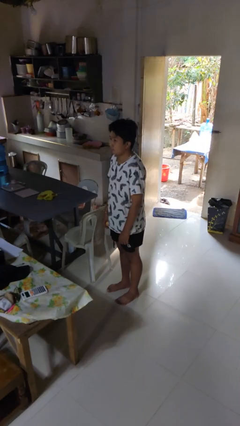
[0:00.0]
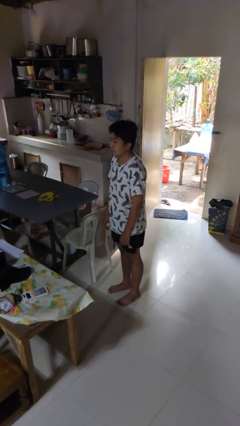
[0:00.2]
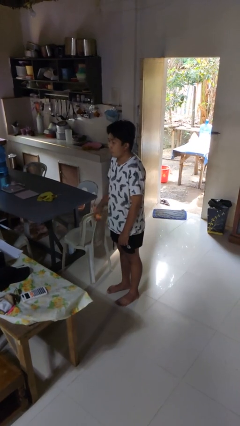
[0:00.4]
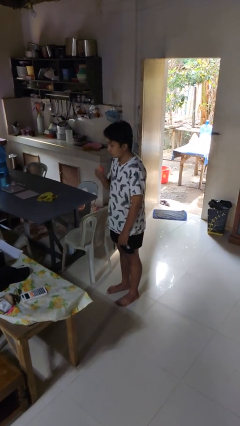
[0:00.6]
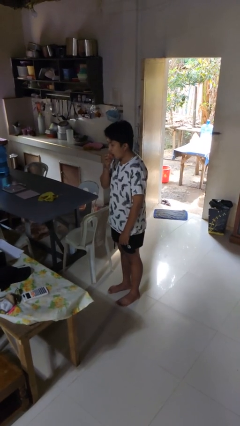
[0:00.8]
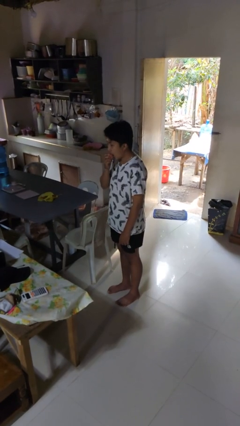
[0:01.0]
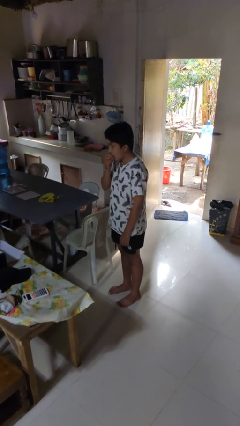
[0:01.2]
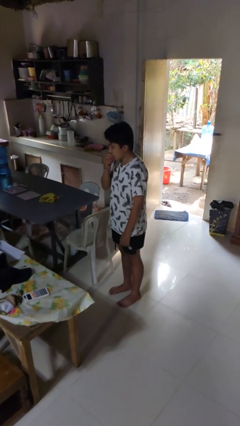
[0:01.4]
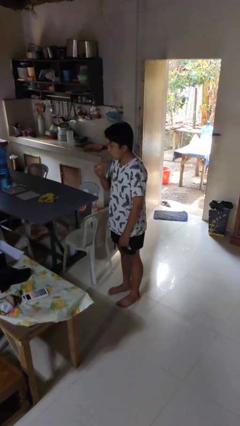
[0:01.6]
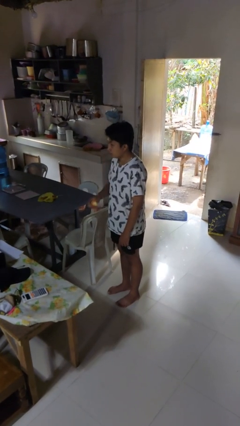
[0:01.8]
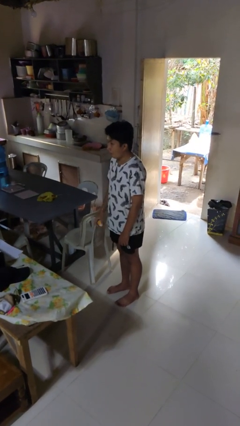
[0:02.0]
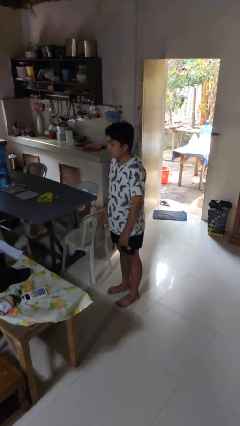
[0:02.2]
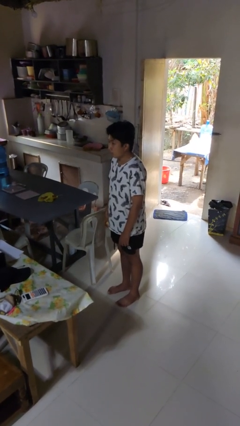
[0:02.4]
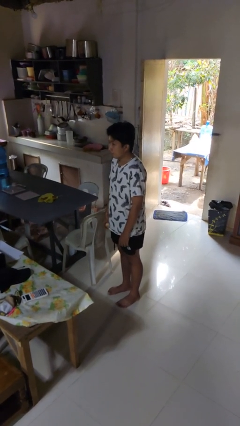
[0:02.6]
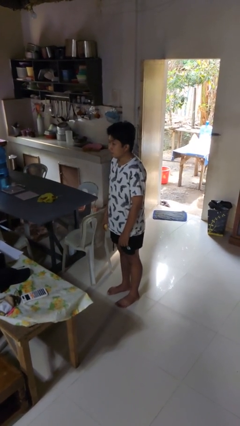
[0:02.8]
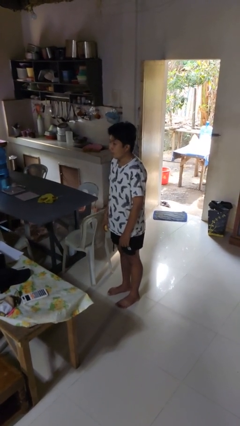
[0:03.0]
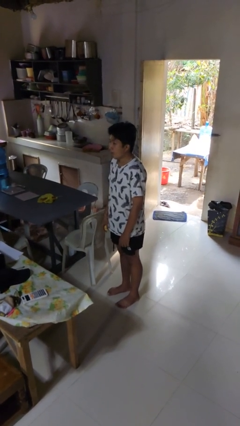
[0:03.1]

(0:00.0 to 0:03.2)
person eats apple

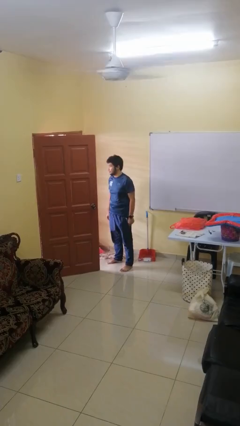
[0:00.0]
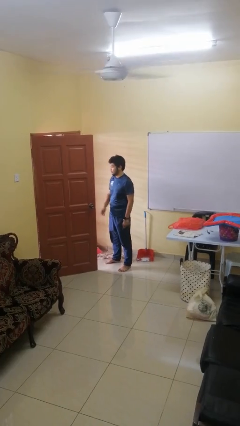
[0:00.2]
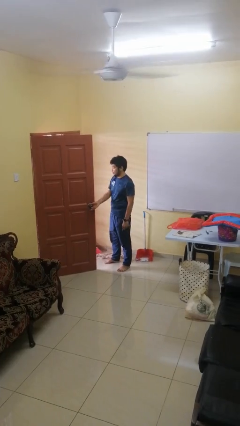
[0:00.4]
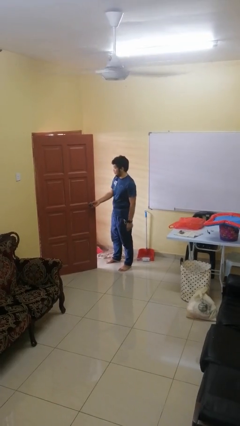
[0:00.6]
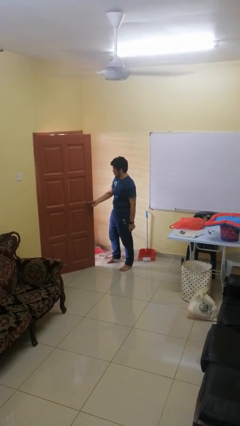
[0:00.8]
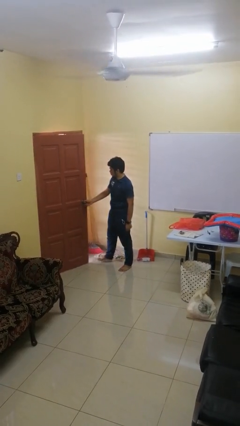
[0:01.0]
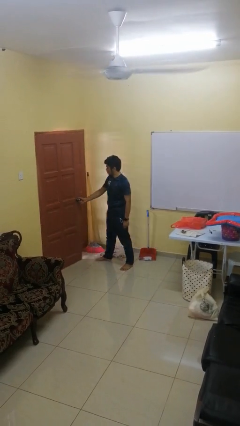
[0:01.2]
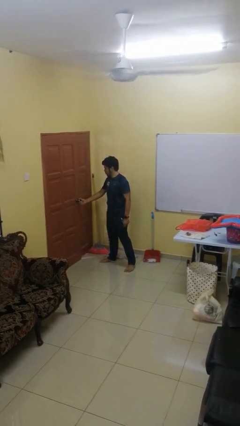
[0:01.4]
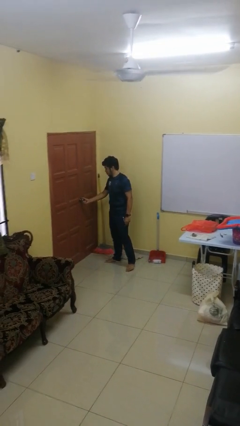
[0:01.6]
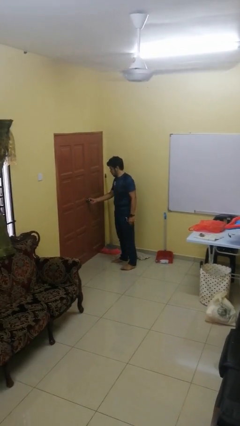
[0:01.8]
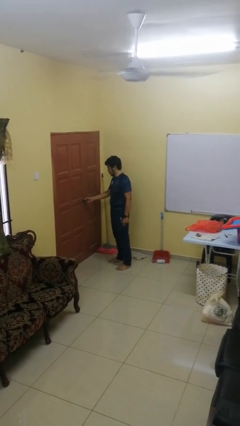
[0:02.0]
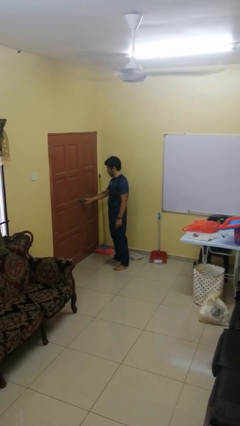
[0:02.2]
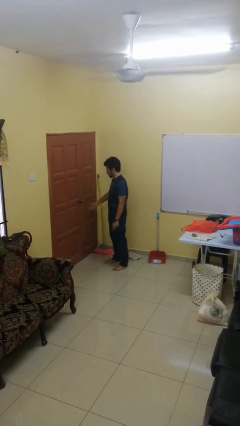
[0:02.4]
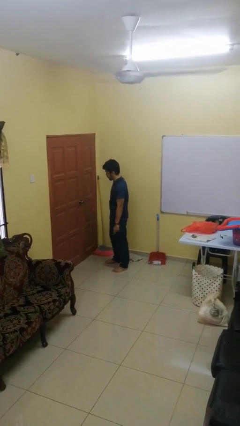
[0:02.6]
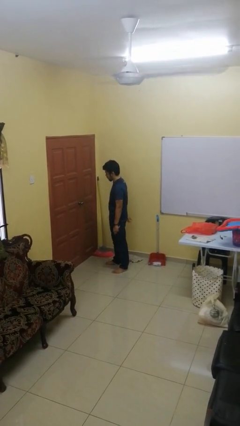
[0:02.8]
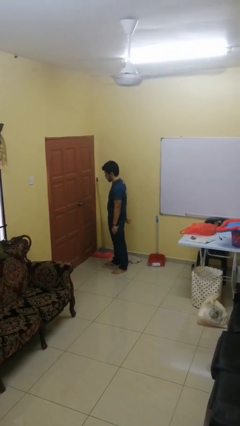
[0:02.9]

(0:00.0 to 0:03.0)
person closes facility door

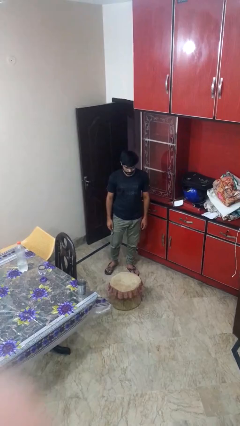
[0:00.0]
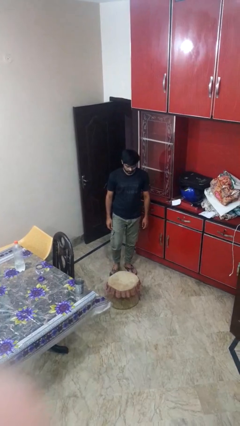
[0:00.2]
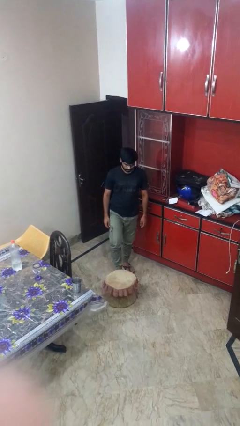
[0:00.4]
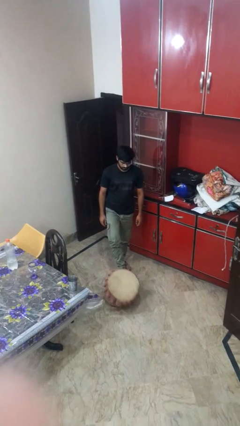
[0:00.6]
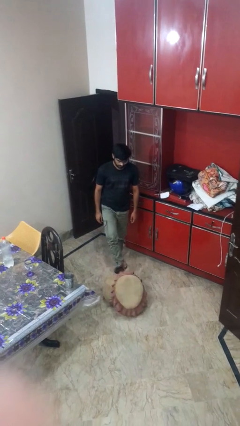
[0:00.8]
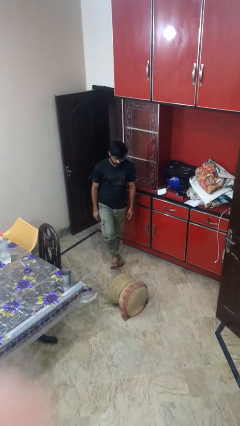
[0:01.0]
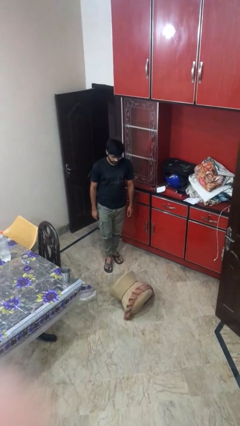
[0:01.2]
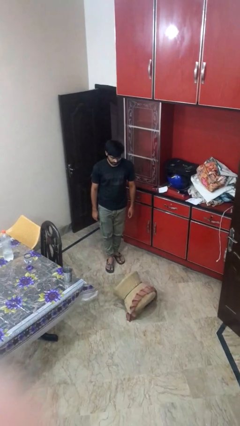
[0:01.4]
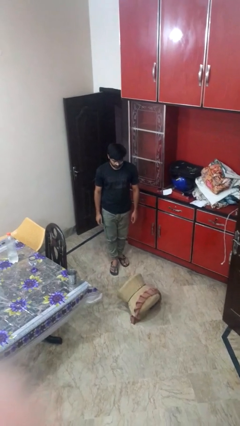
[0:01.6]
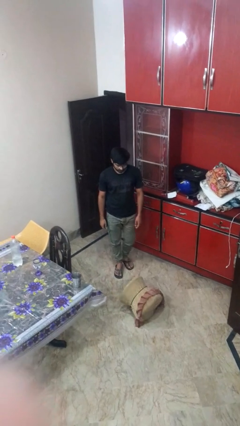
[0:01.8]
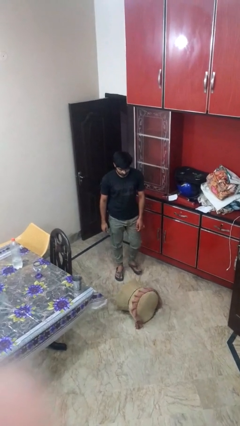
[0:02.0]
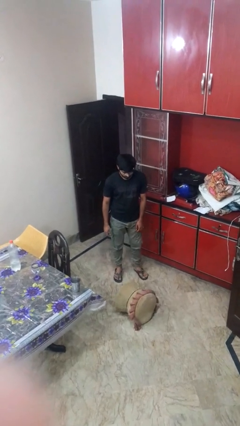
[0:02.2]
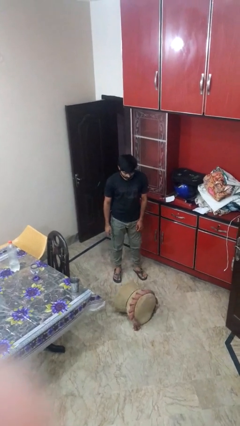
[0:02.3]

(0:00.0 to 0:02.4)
person knocks over furniture

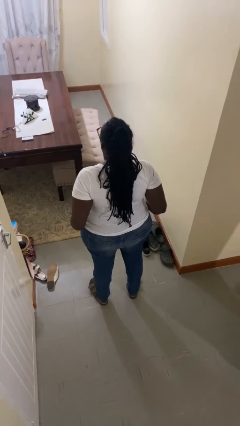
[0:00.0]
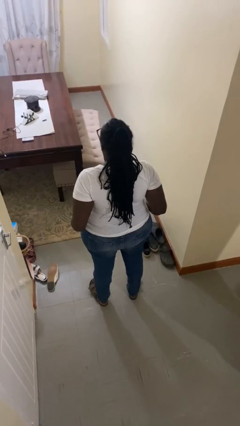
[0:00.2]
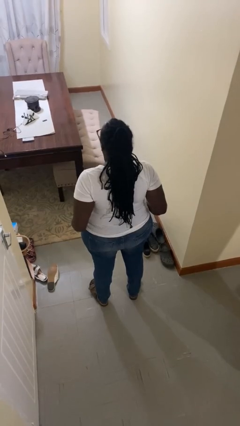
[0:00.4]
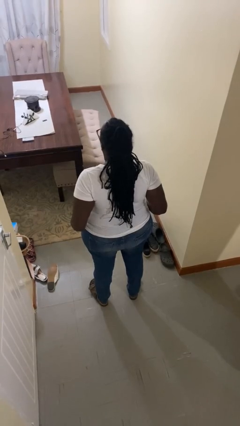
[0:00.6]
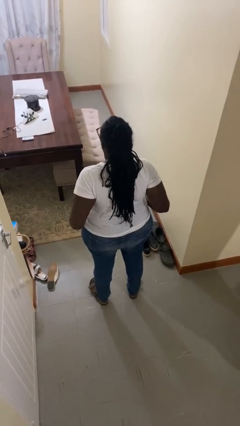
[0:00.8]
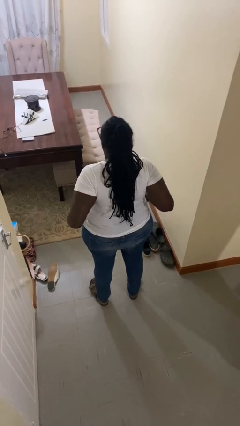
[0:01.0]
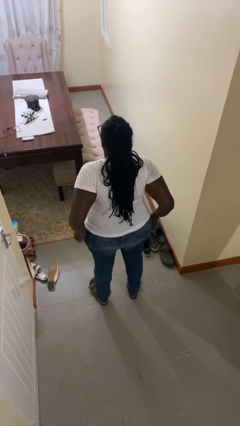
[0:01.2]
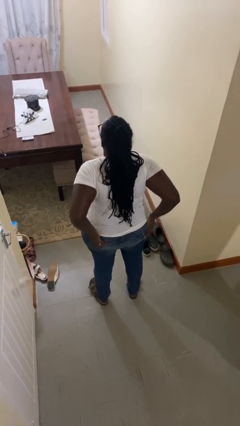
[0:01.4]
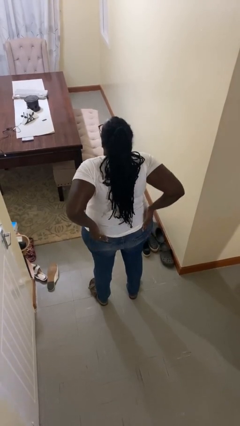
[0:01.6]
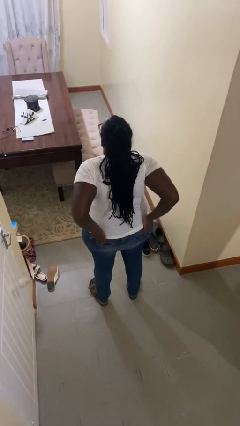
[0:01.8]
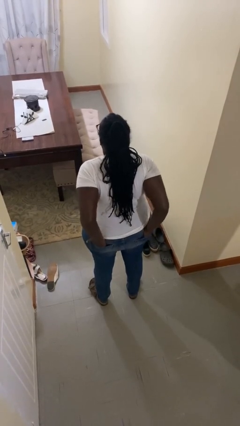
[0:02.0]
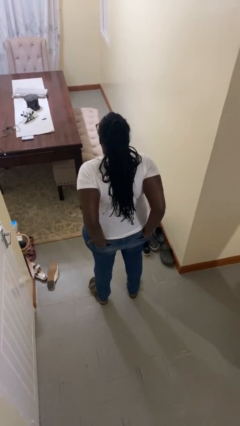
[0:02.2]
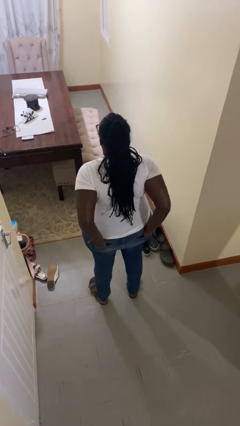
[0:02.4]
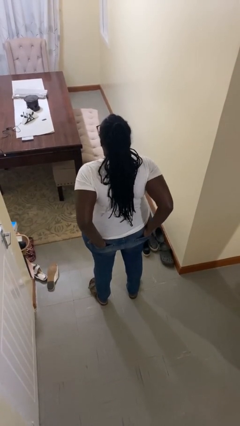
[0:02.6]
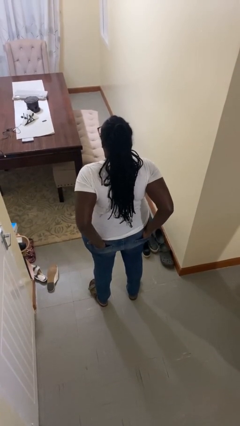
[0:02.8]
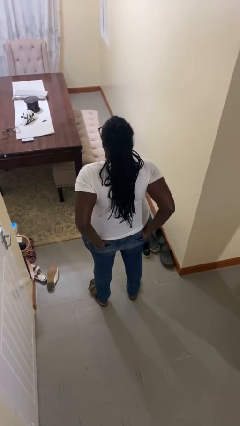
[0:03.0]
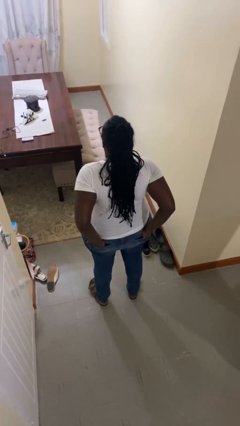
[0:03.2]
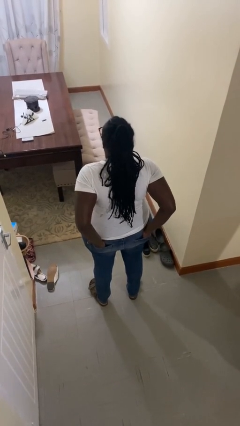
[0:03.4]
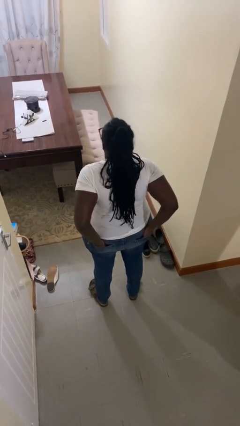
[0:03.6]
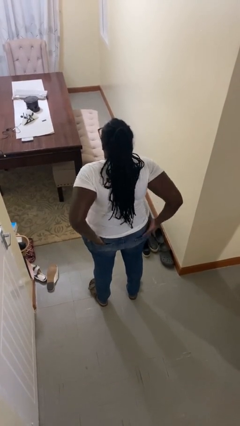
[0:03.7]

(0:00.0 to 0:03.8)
person puts hands in back pockets

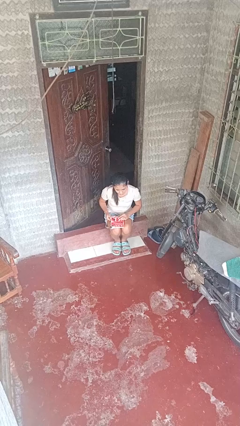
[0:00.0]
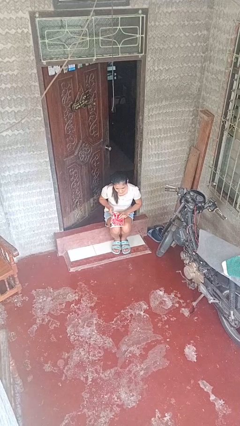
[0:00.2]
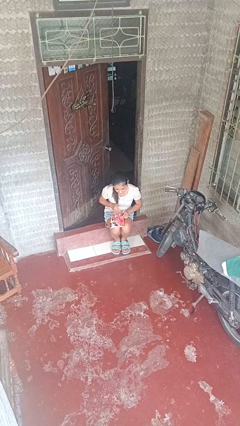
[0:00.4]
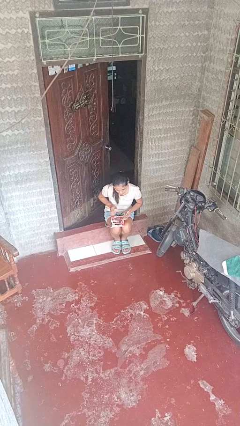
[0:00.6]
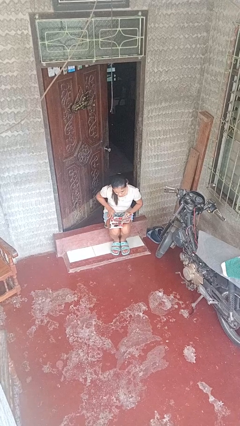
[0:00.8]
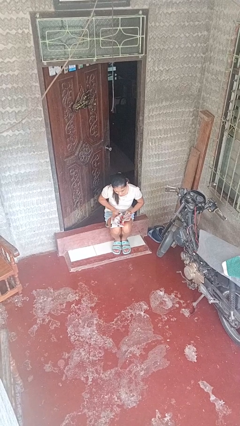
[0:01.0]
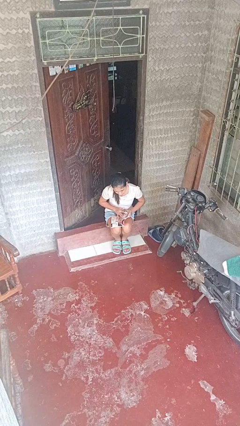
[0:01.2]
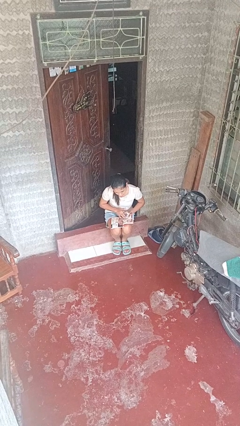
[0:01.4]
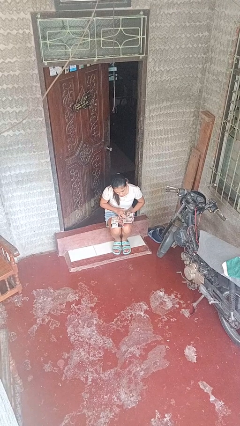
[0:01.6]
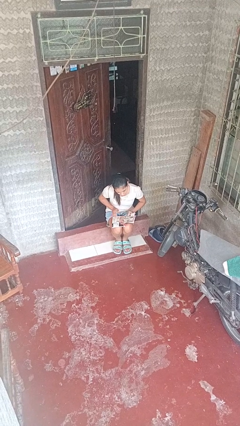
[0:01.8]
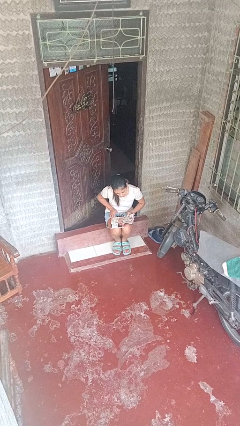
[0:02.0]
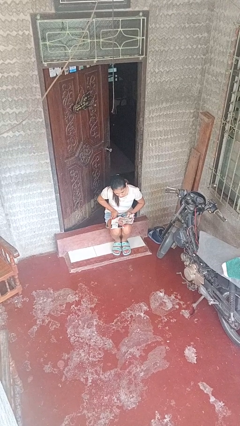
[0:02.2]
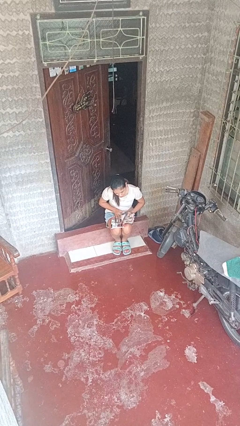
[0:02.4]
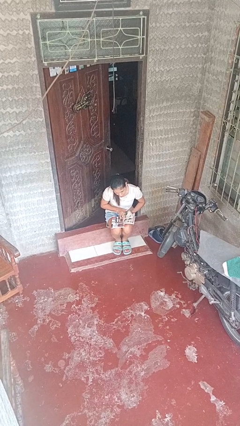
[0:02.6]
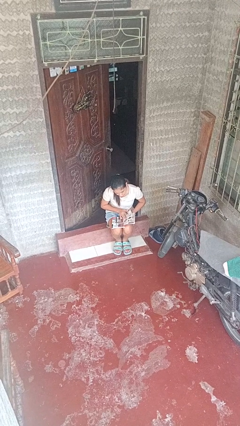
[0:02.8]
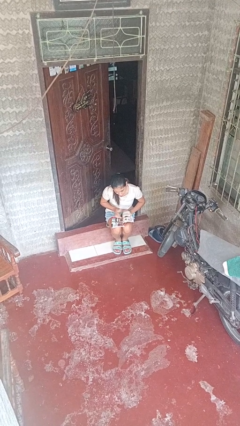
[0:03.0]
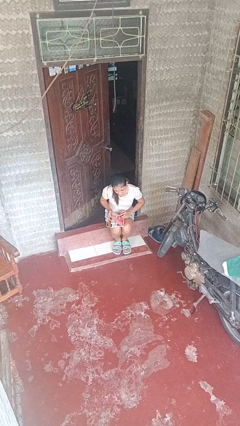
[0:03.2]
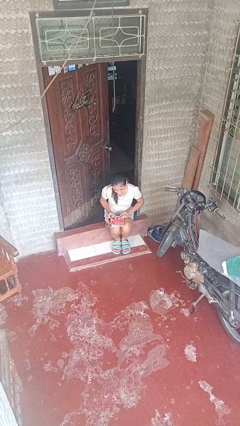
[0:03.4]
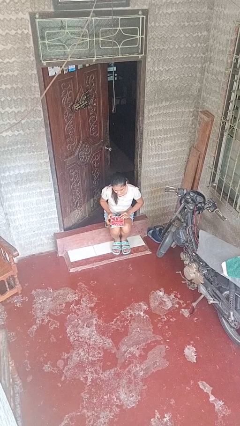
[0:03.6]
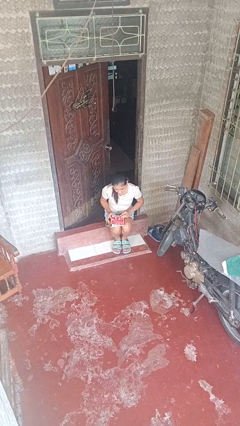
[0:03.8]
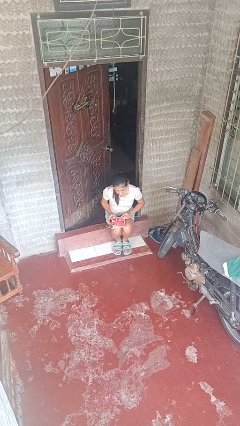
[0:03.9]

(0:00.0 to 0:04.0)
person reads magazine

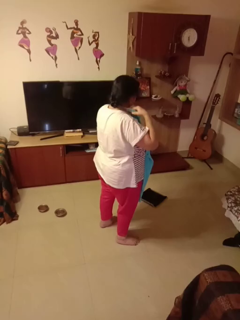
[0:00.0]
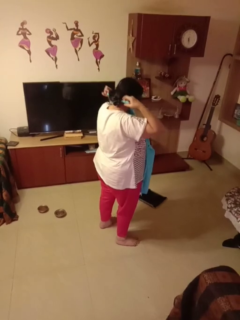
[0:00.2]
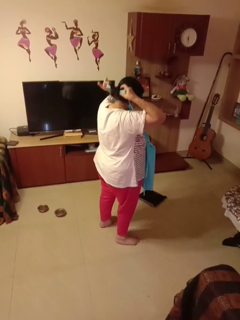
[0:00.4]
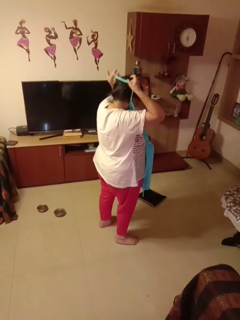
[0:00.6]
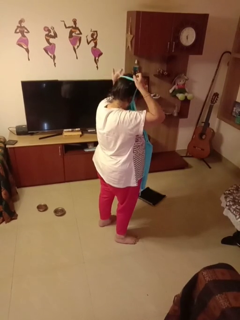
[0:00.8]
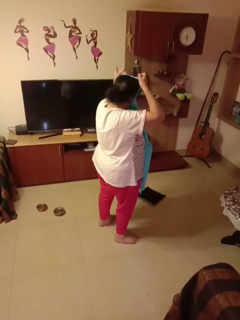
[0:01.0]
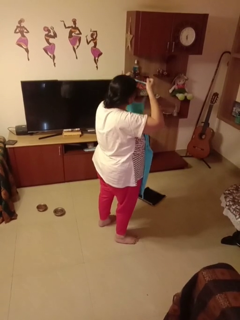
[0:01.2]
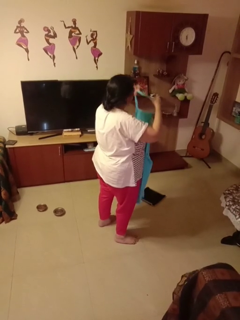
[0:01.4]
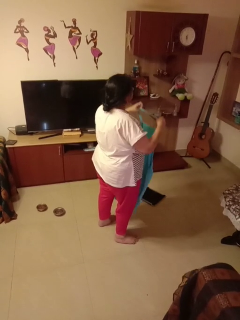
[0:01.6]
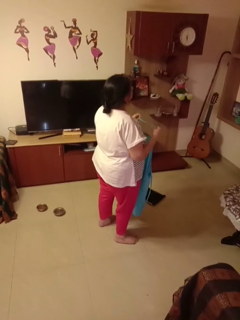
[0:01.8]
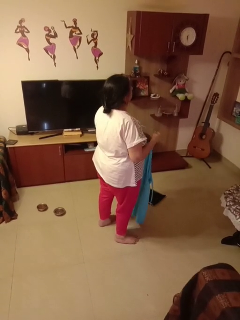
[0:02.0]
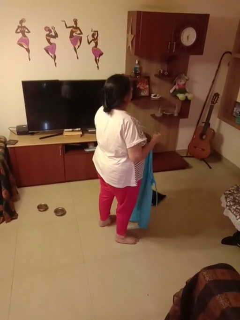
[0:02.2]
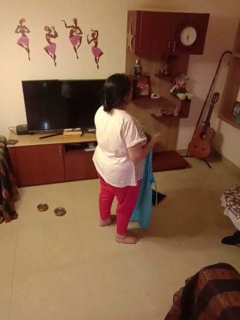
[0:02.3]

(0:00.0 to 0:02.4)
person takes off apron
